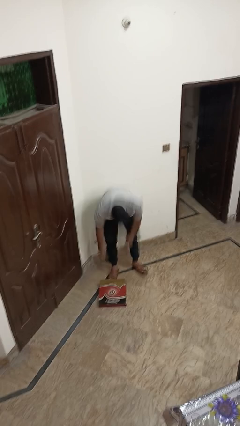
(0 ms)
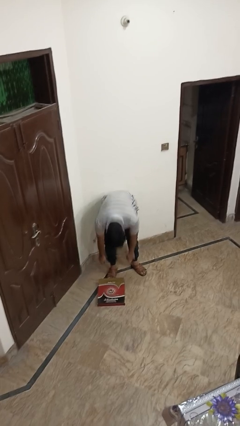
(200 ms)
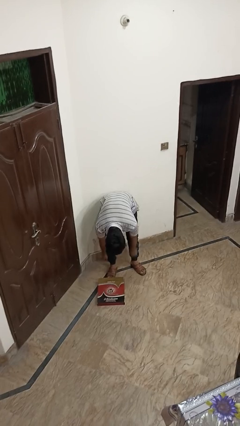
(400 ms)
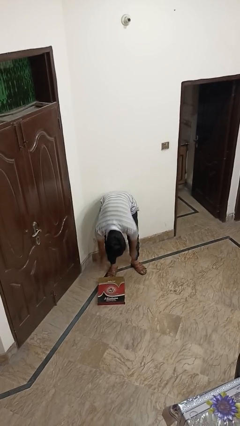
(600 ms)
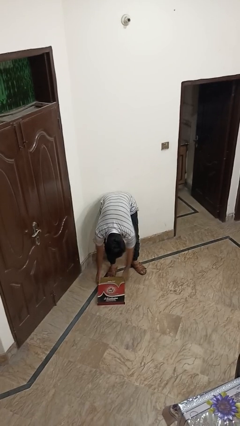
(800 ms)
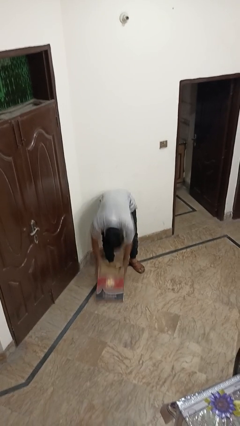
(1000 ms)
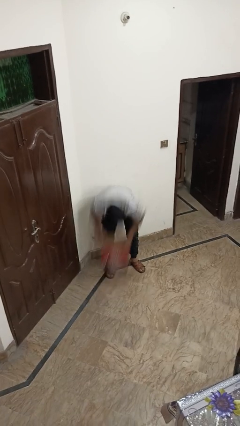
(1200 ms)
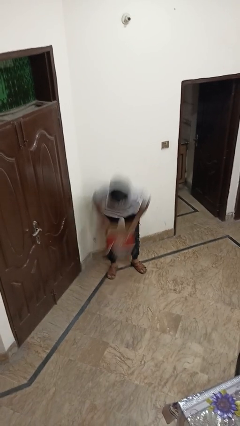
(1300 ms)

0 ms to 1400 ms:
person picks up object from floor

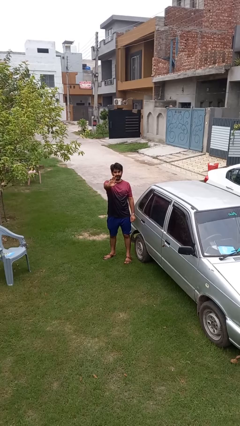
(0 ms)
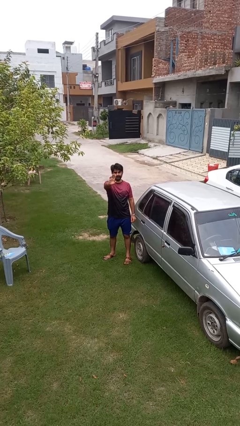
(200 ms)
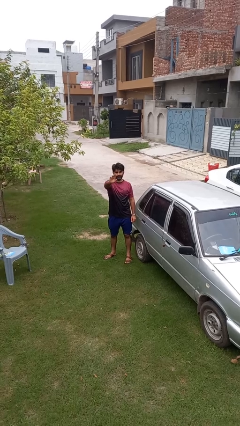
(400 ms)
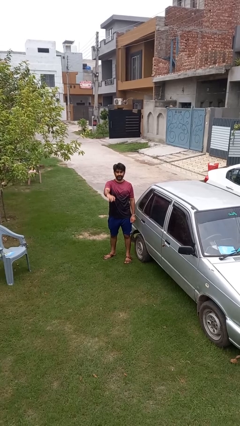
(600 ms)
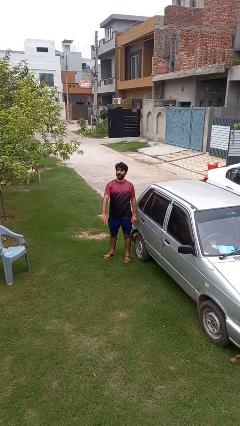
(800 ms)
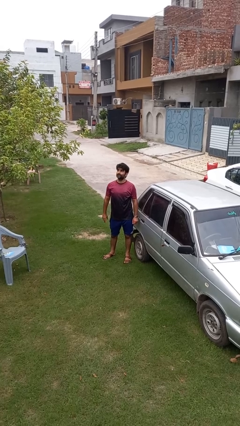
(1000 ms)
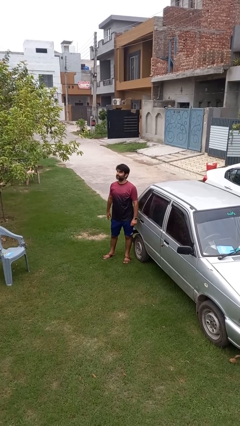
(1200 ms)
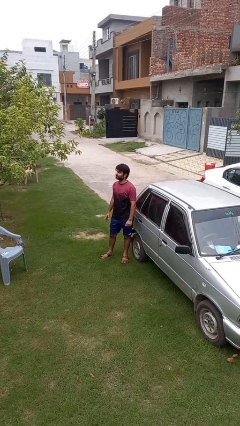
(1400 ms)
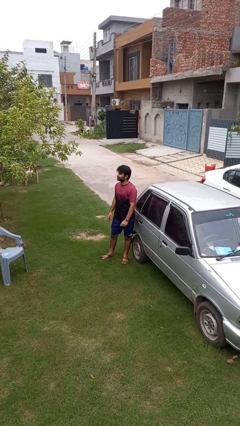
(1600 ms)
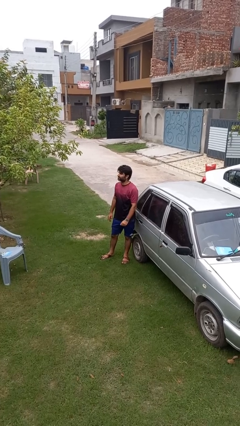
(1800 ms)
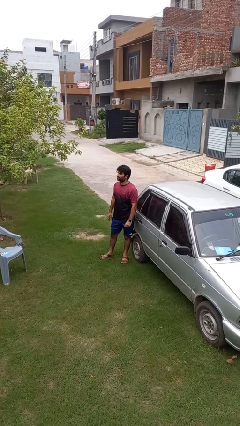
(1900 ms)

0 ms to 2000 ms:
person gestures lower hand

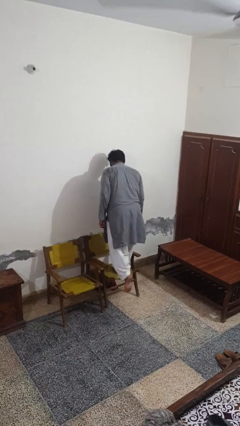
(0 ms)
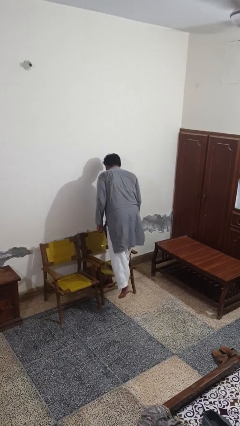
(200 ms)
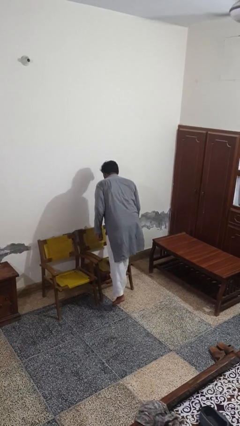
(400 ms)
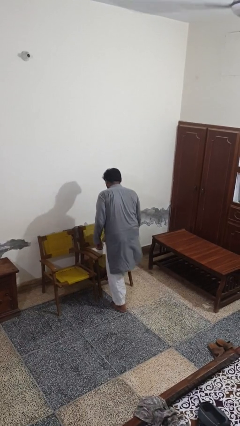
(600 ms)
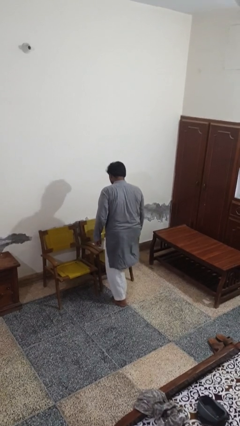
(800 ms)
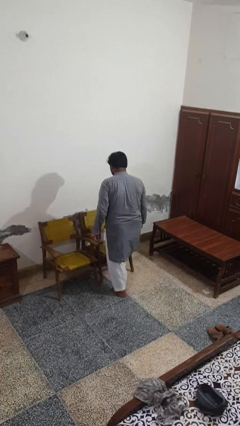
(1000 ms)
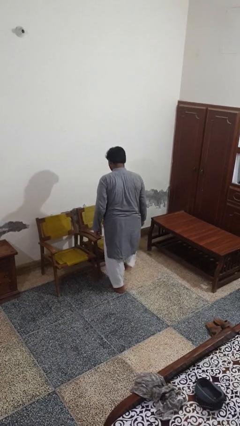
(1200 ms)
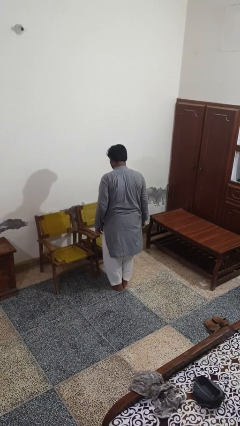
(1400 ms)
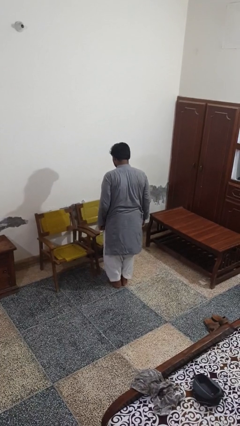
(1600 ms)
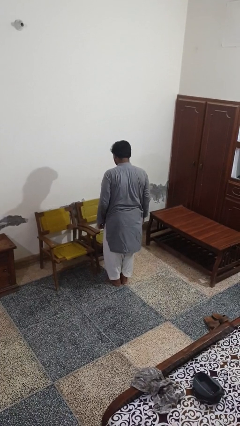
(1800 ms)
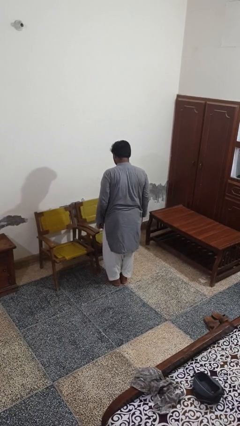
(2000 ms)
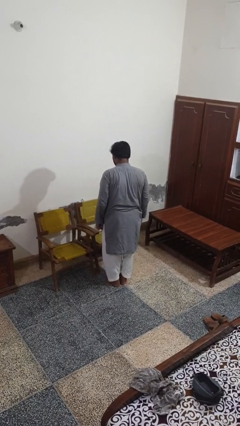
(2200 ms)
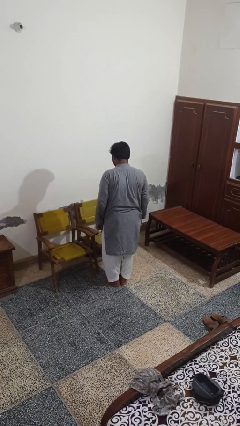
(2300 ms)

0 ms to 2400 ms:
person climbs off chair

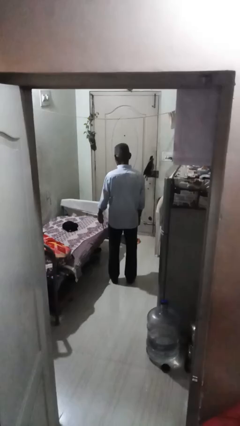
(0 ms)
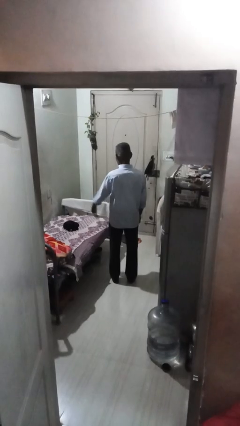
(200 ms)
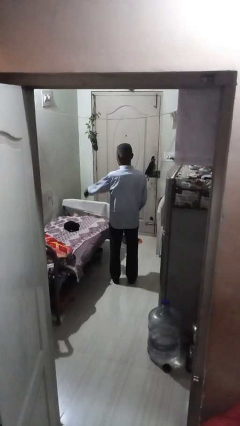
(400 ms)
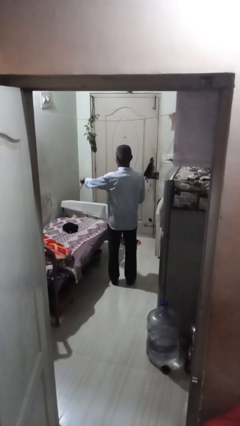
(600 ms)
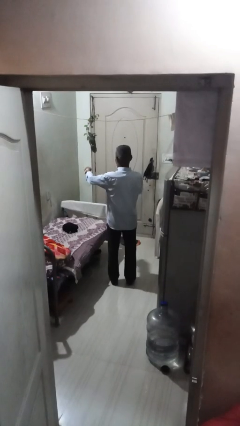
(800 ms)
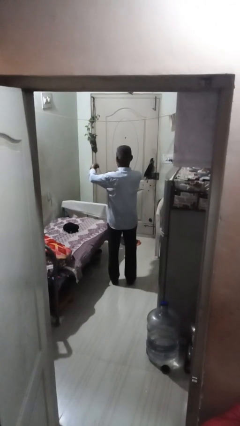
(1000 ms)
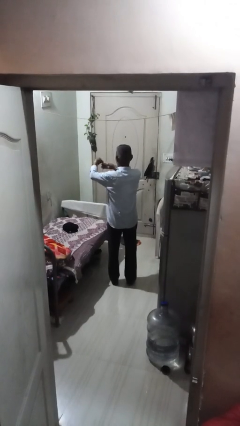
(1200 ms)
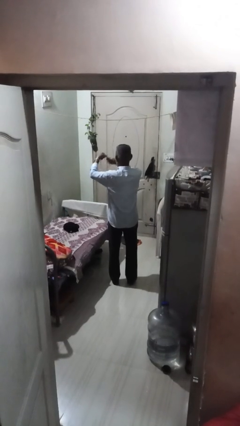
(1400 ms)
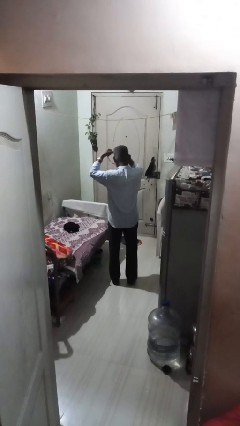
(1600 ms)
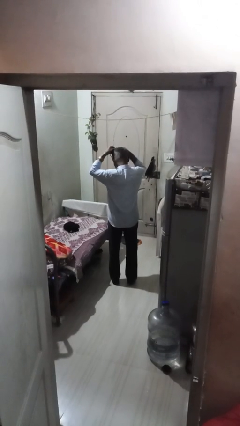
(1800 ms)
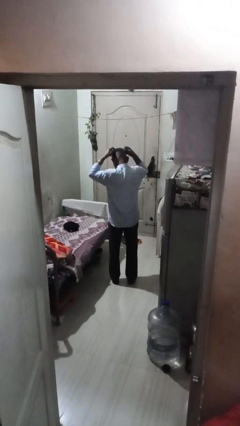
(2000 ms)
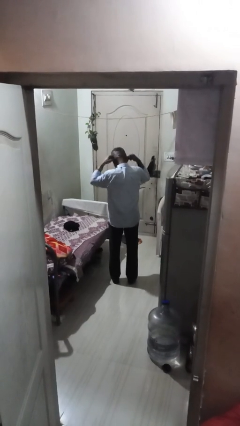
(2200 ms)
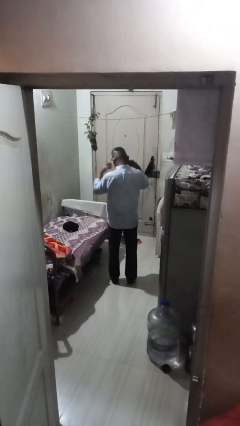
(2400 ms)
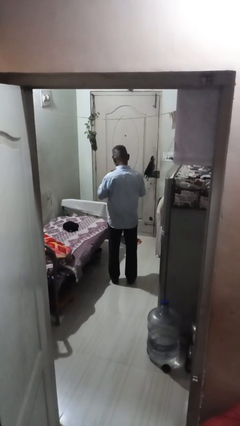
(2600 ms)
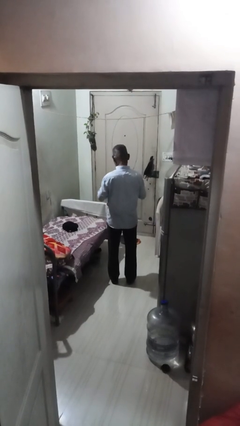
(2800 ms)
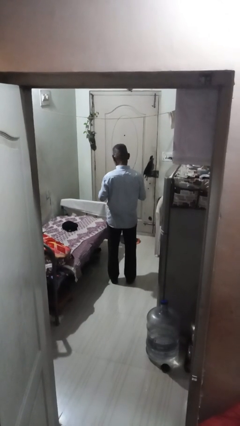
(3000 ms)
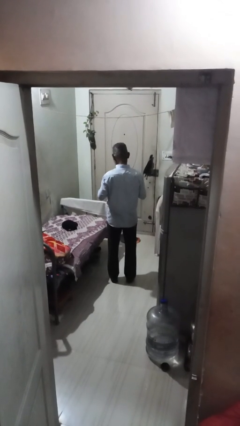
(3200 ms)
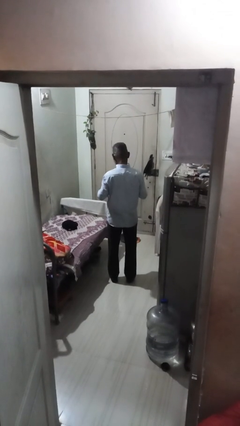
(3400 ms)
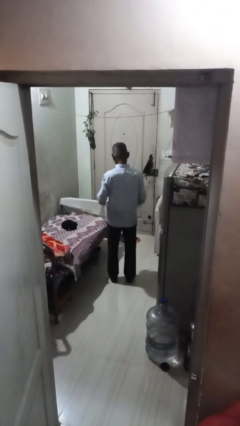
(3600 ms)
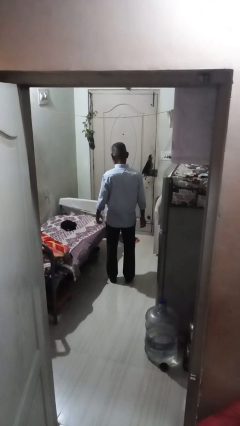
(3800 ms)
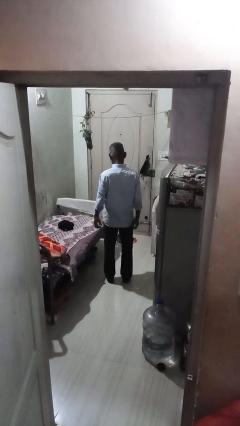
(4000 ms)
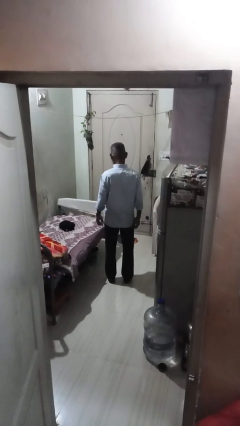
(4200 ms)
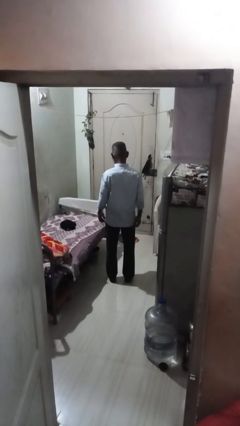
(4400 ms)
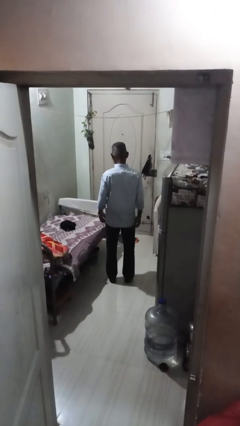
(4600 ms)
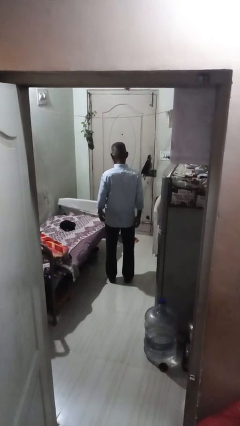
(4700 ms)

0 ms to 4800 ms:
person puts on necklace

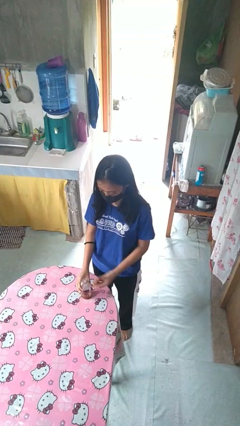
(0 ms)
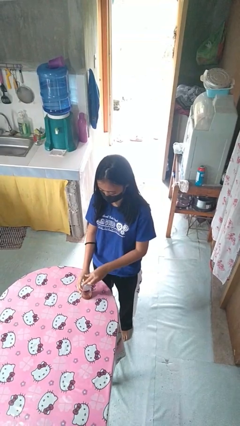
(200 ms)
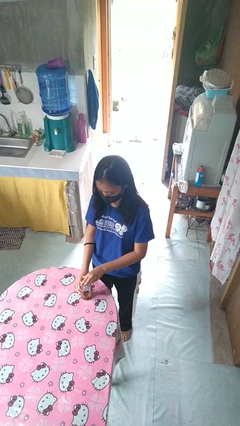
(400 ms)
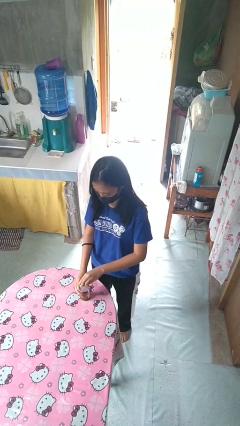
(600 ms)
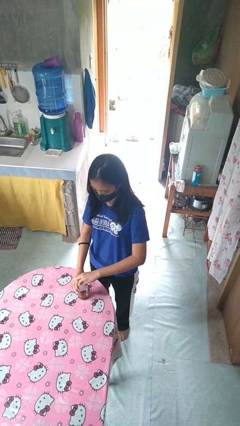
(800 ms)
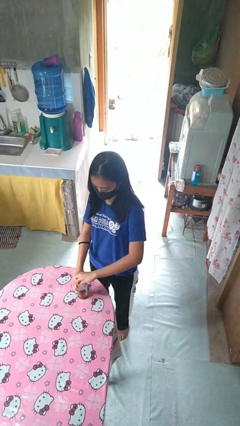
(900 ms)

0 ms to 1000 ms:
person closes jar

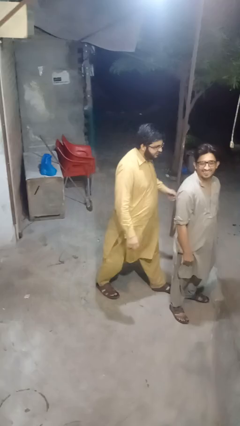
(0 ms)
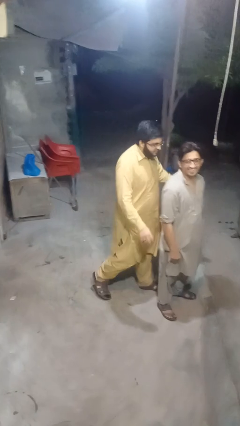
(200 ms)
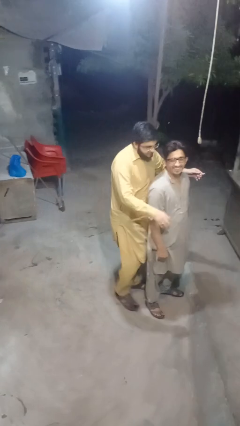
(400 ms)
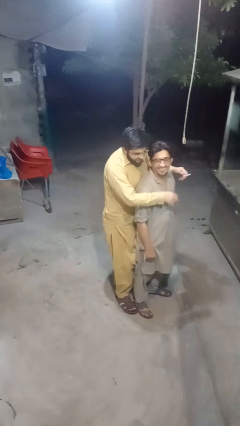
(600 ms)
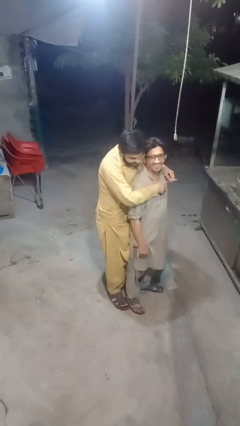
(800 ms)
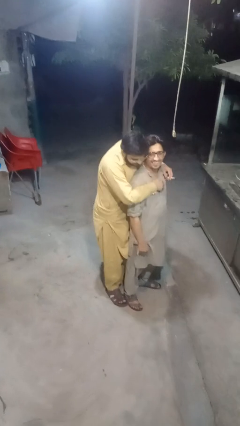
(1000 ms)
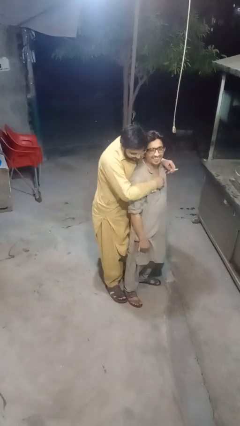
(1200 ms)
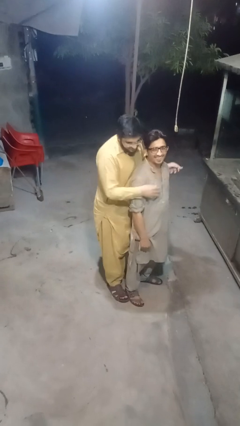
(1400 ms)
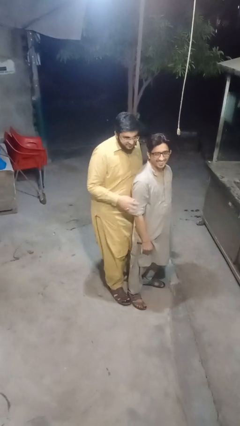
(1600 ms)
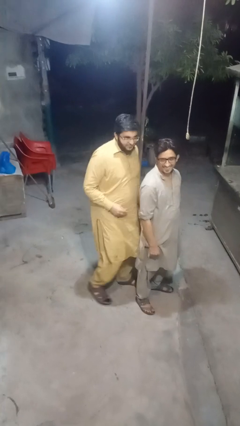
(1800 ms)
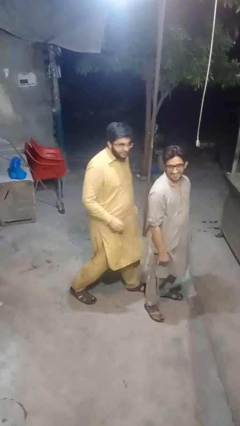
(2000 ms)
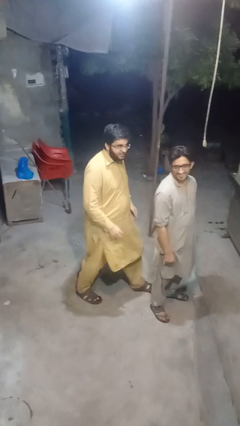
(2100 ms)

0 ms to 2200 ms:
person hugs person from behind

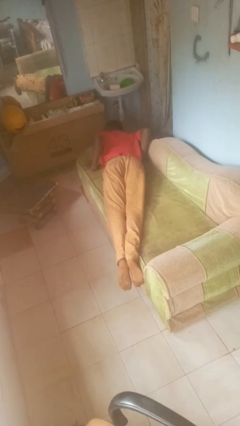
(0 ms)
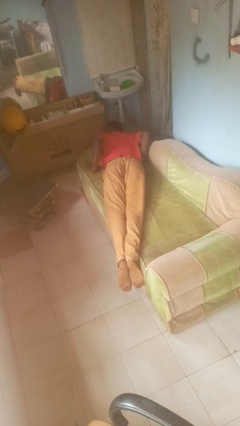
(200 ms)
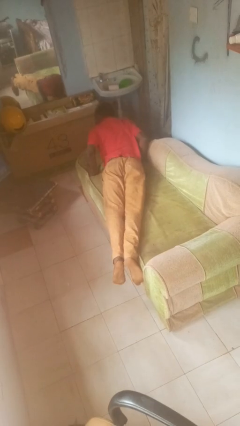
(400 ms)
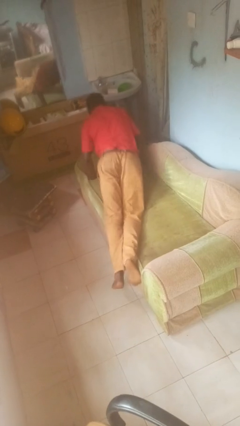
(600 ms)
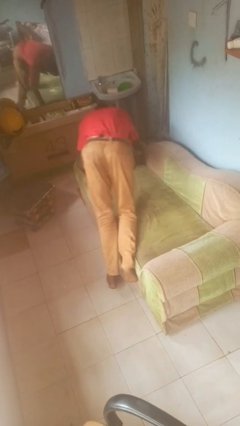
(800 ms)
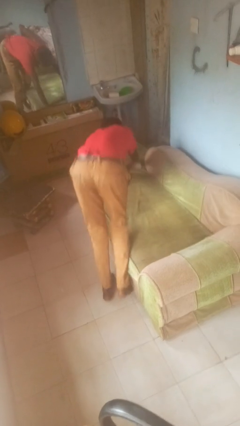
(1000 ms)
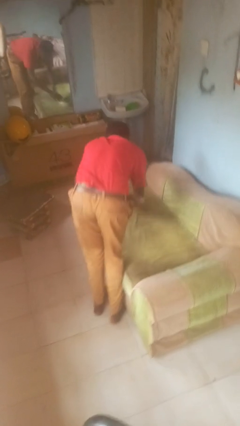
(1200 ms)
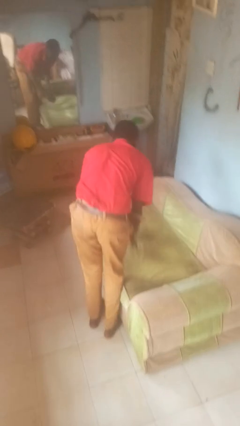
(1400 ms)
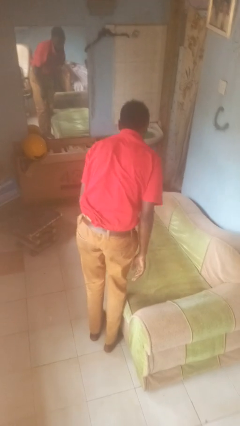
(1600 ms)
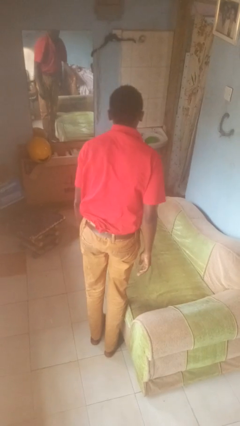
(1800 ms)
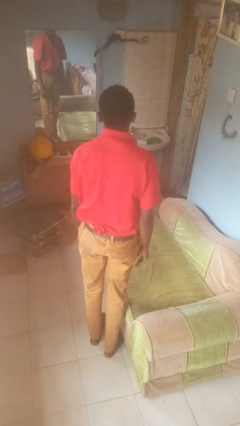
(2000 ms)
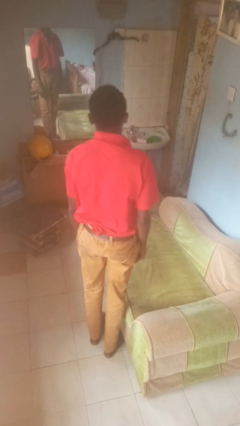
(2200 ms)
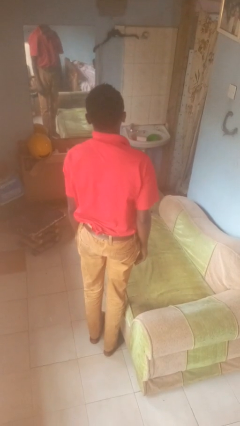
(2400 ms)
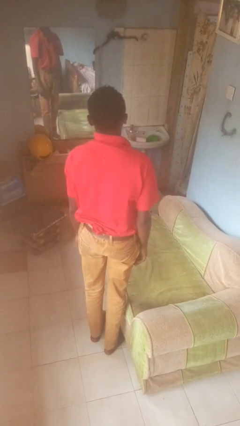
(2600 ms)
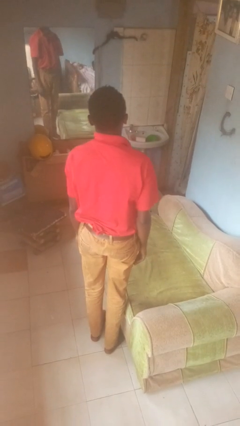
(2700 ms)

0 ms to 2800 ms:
person stands up

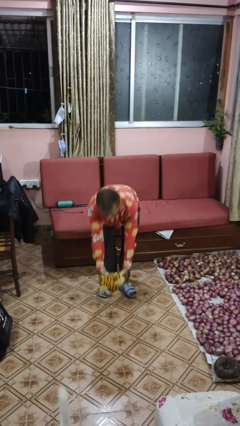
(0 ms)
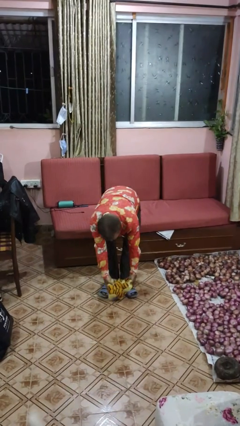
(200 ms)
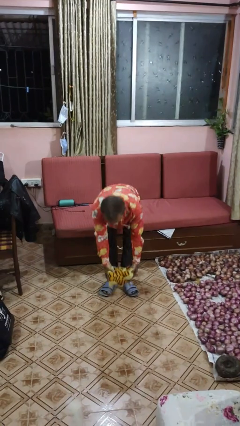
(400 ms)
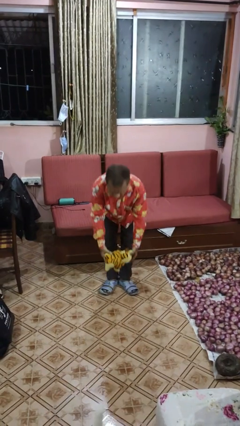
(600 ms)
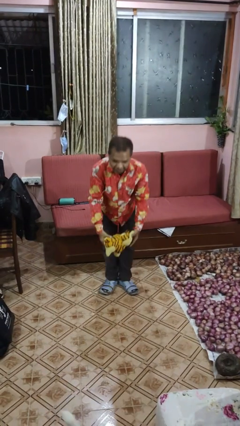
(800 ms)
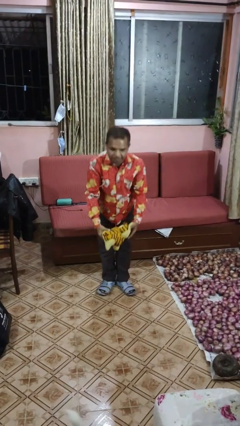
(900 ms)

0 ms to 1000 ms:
person catches dropped object
